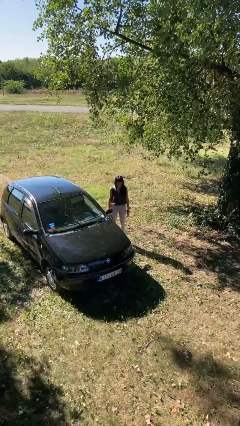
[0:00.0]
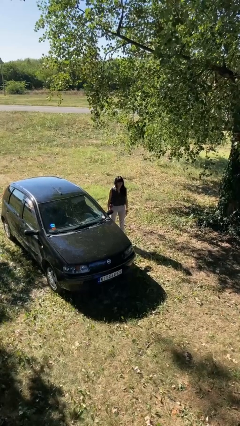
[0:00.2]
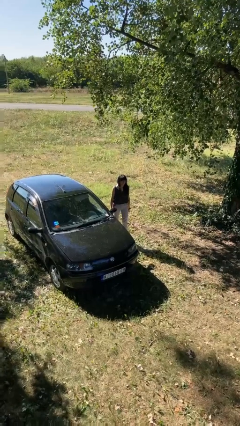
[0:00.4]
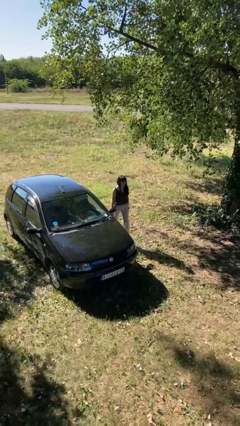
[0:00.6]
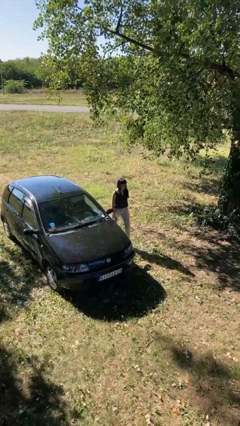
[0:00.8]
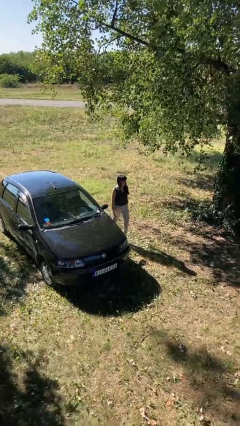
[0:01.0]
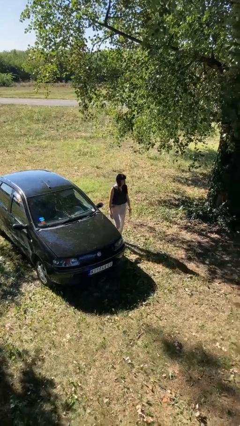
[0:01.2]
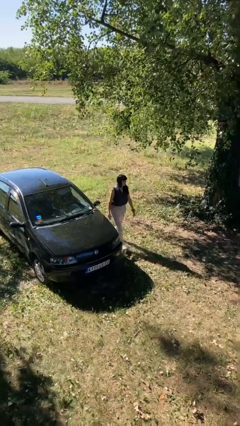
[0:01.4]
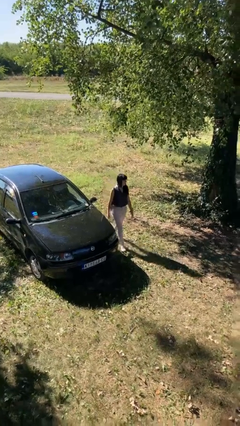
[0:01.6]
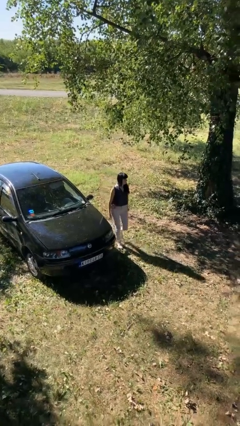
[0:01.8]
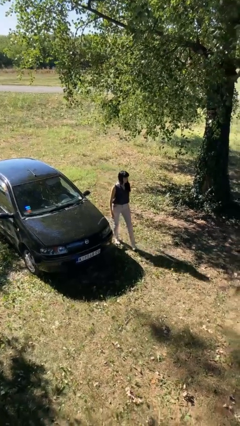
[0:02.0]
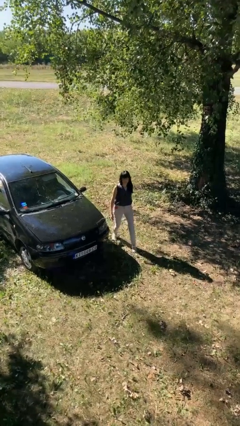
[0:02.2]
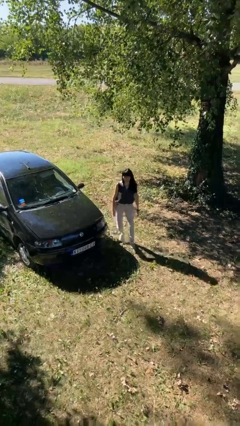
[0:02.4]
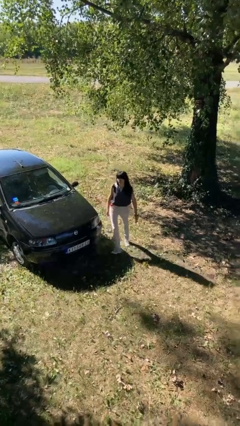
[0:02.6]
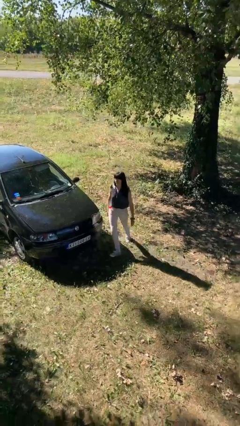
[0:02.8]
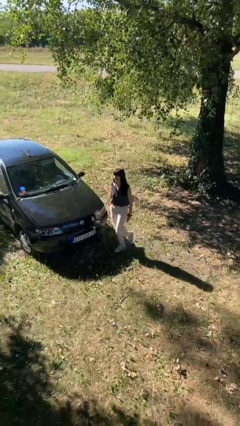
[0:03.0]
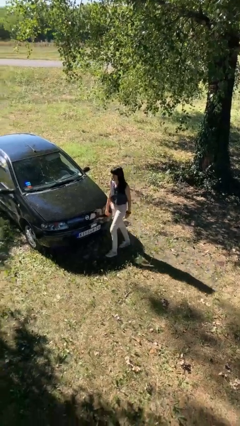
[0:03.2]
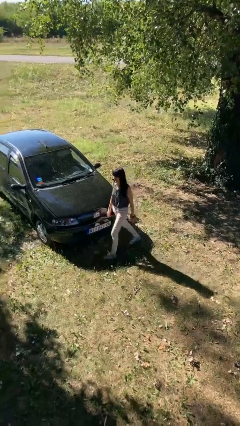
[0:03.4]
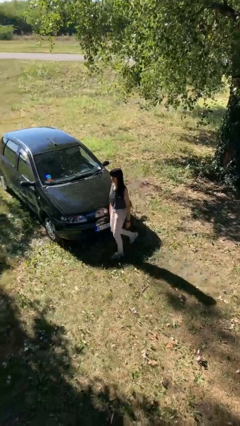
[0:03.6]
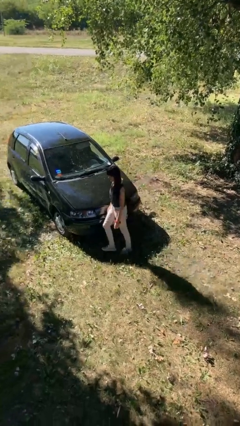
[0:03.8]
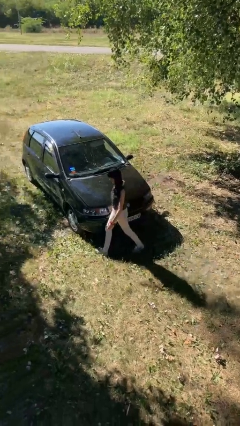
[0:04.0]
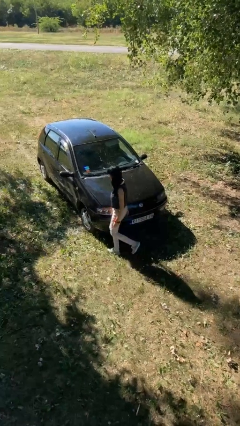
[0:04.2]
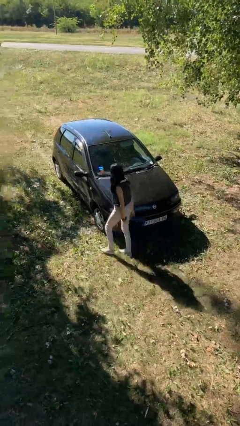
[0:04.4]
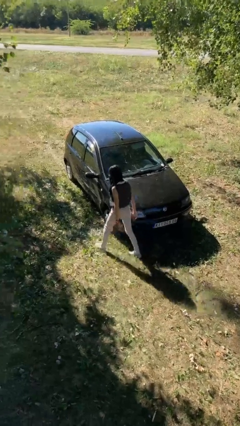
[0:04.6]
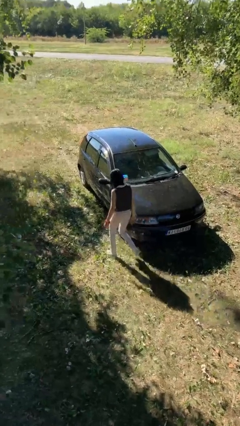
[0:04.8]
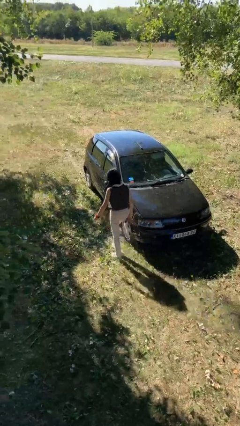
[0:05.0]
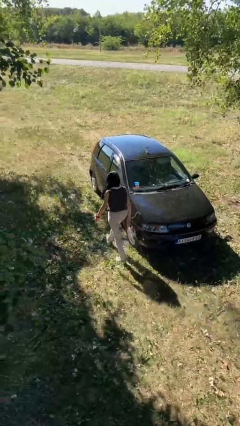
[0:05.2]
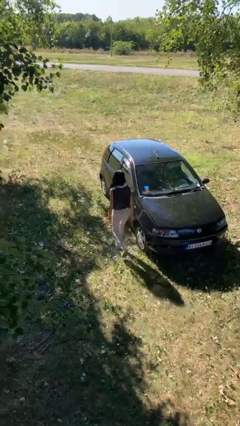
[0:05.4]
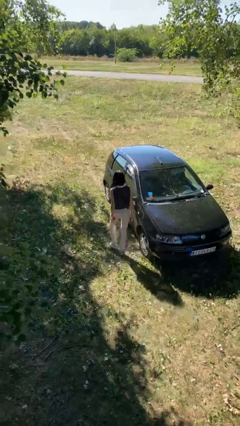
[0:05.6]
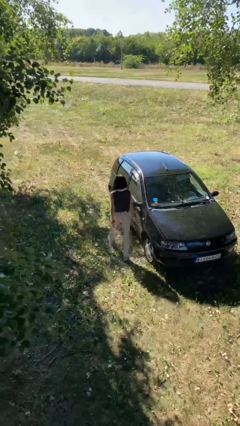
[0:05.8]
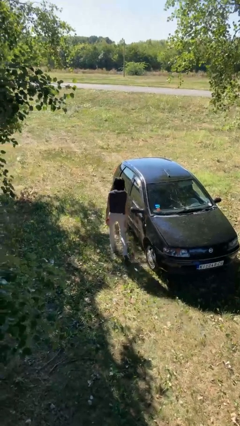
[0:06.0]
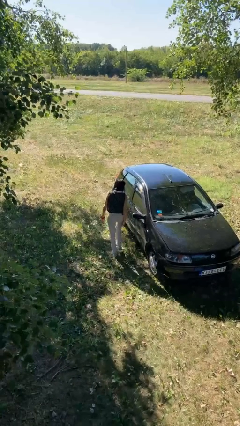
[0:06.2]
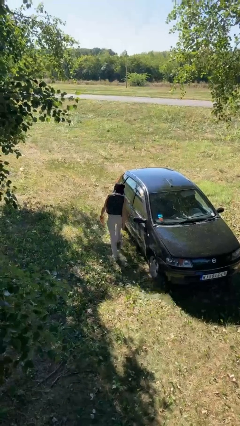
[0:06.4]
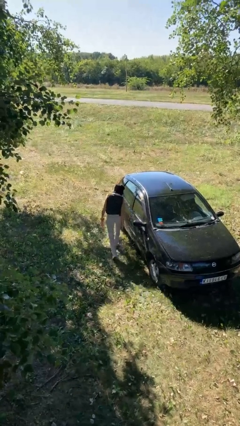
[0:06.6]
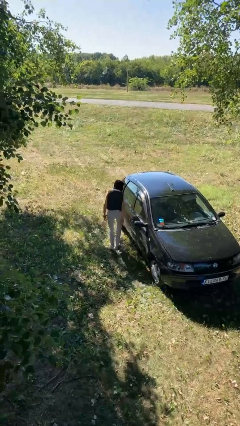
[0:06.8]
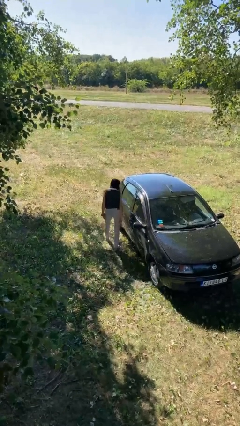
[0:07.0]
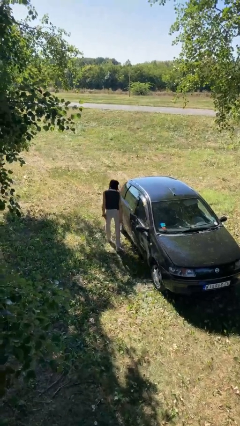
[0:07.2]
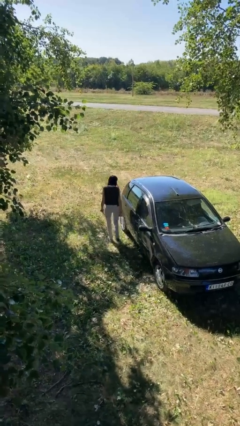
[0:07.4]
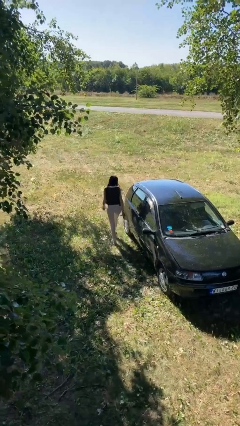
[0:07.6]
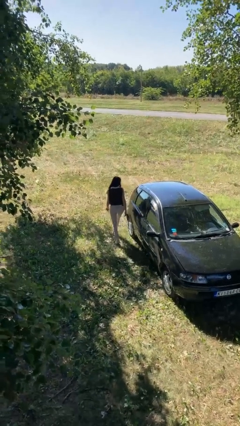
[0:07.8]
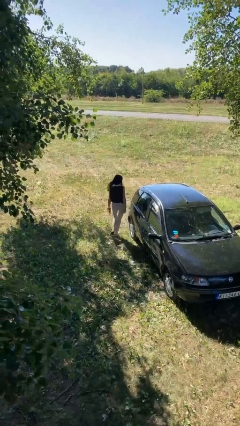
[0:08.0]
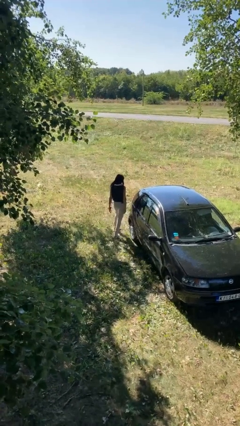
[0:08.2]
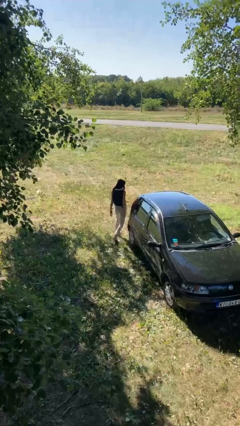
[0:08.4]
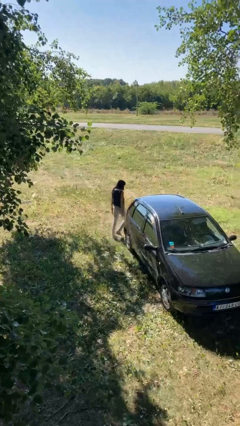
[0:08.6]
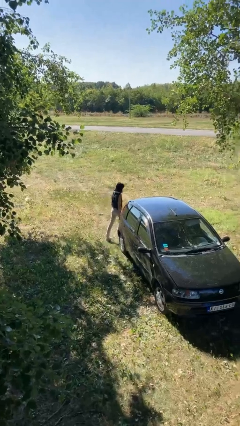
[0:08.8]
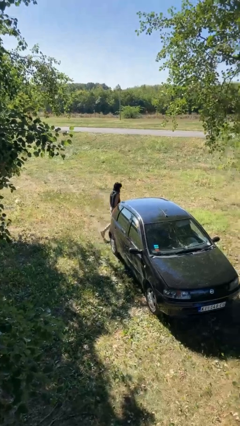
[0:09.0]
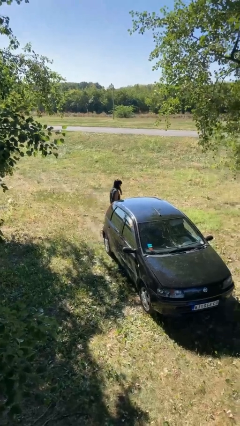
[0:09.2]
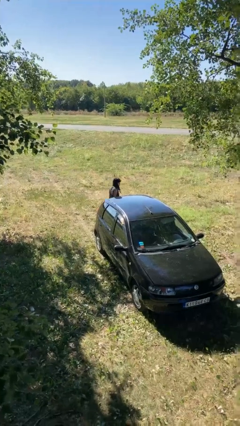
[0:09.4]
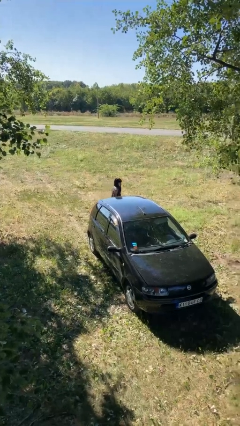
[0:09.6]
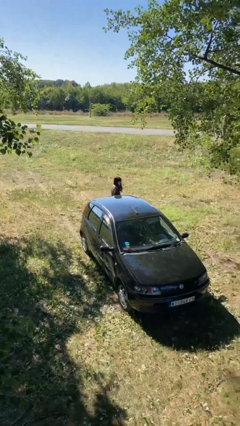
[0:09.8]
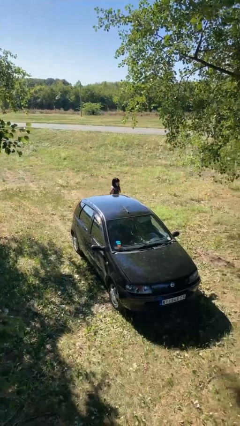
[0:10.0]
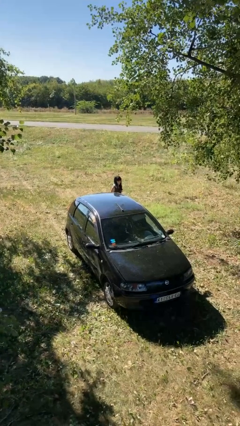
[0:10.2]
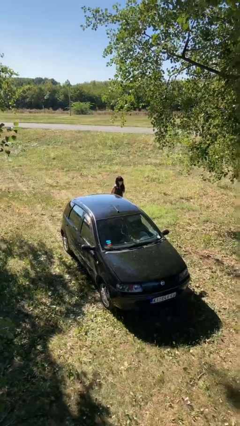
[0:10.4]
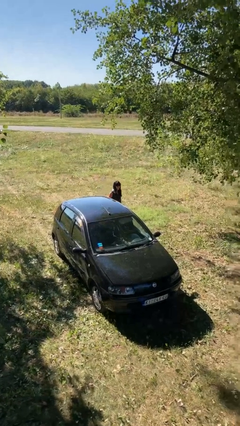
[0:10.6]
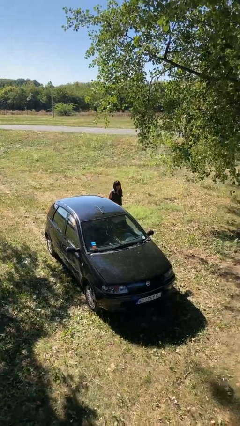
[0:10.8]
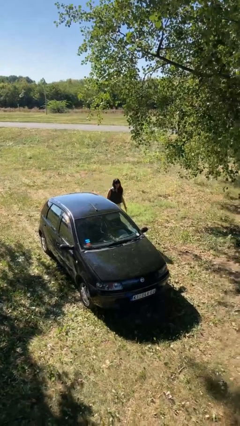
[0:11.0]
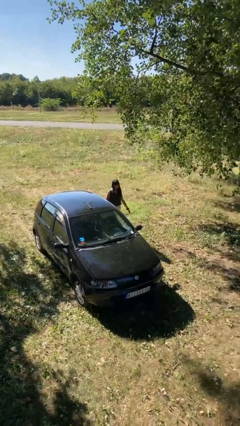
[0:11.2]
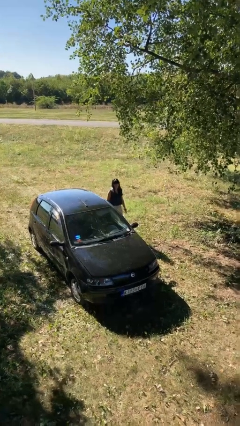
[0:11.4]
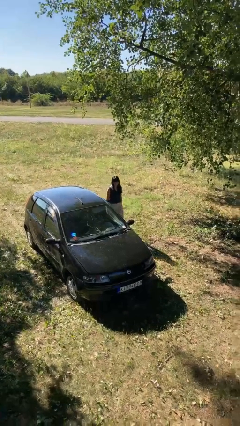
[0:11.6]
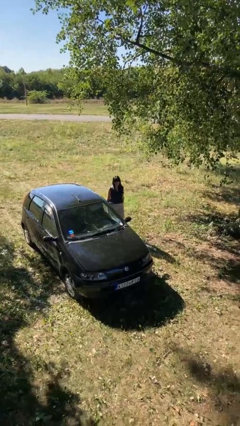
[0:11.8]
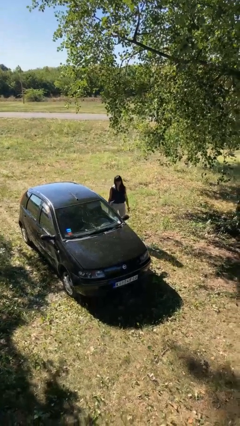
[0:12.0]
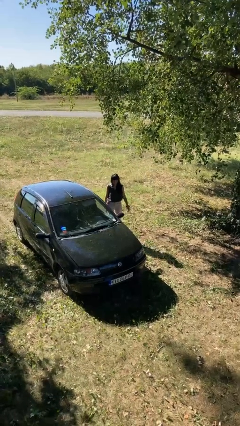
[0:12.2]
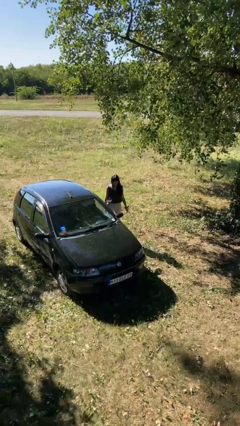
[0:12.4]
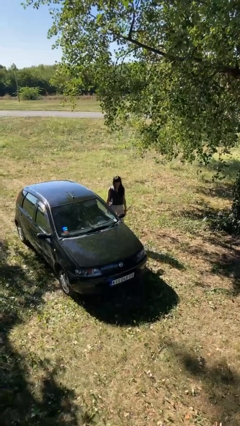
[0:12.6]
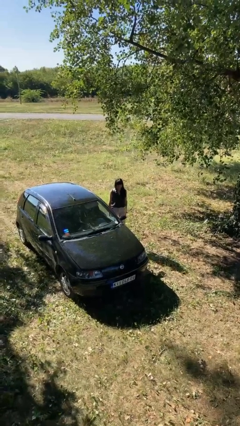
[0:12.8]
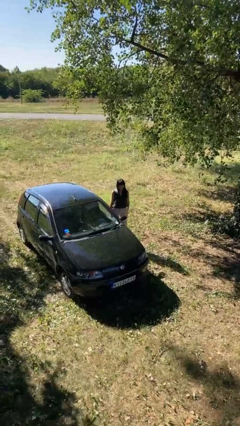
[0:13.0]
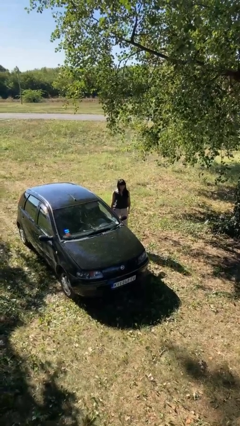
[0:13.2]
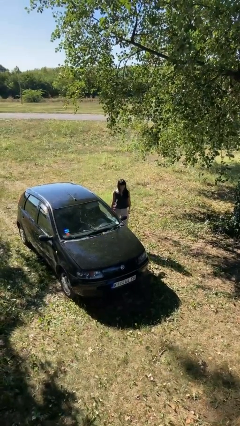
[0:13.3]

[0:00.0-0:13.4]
person walks around car

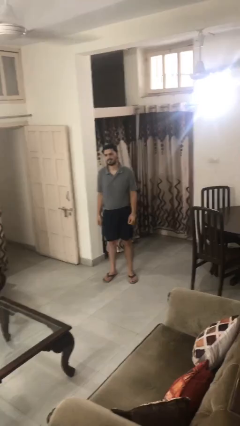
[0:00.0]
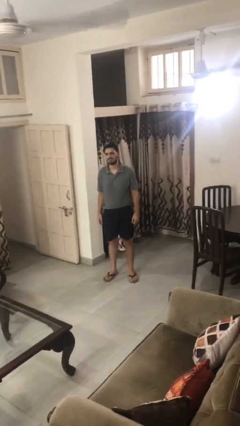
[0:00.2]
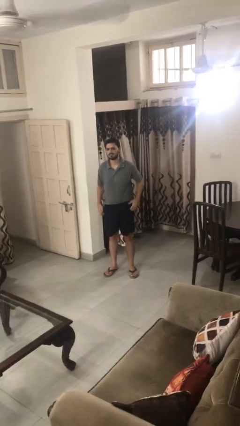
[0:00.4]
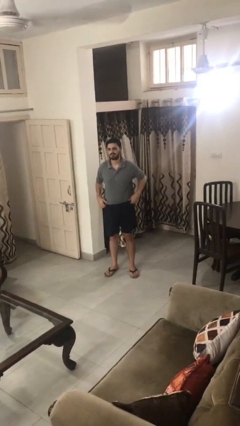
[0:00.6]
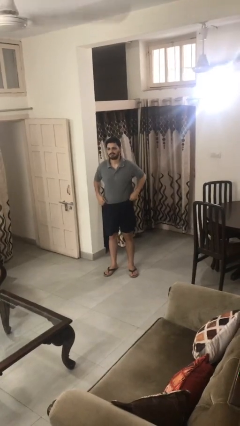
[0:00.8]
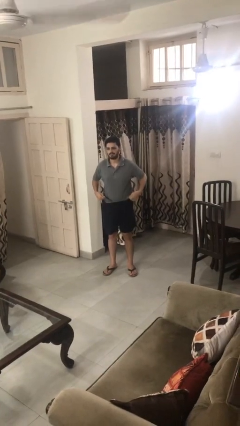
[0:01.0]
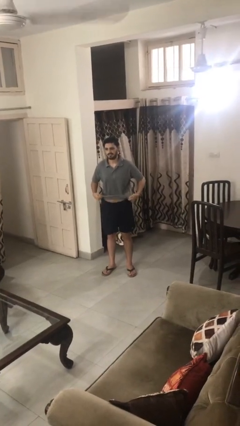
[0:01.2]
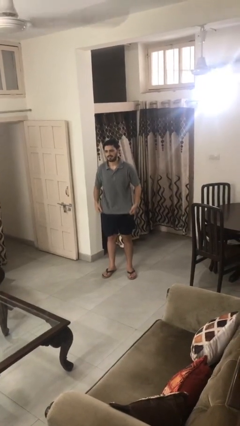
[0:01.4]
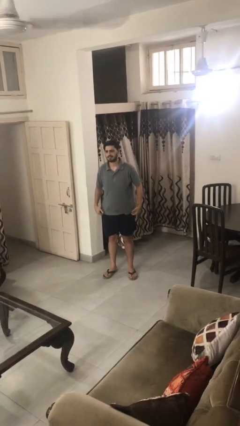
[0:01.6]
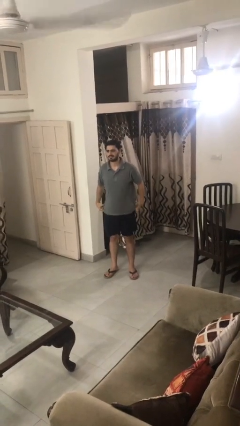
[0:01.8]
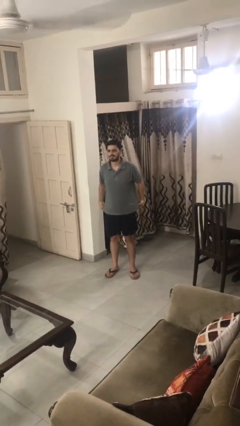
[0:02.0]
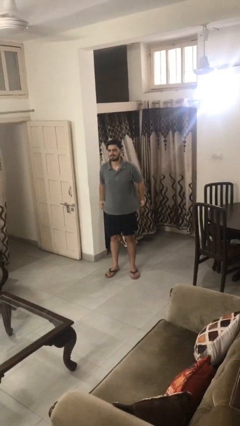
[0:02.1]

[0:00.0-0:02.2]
person untucks shirt

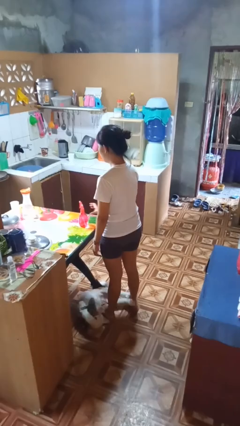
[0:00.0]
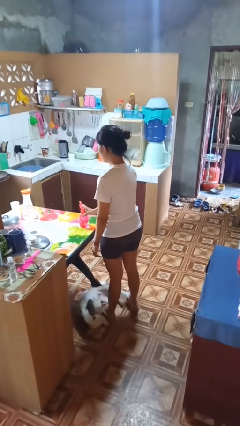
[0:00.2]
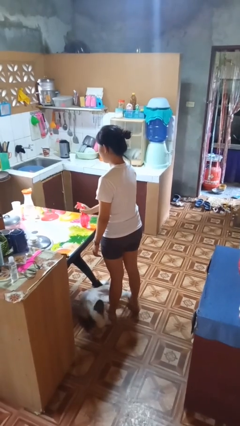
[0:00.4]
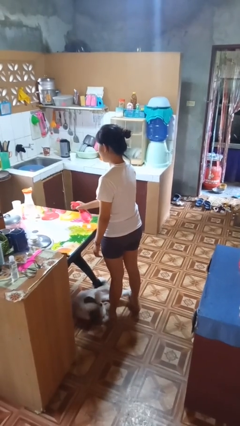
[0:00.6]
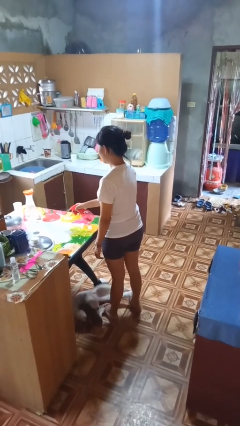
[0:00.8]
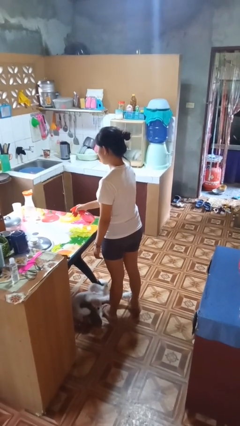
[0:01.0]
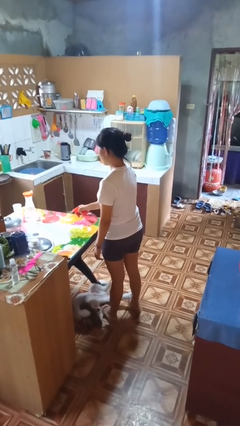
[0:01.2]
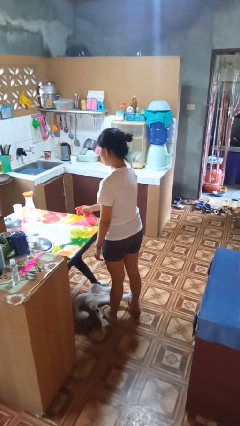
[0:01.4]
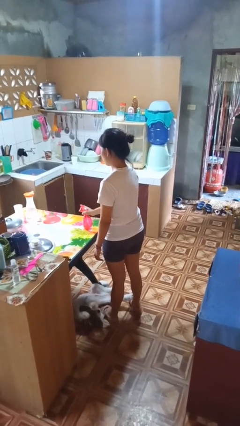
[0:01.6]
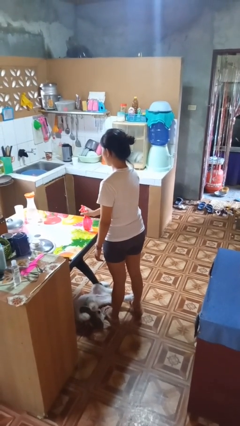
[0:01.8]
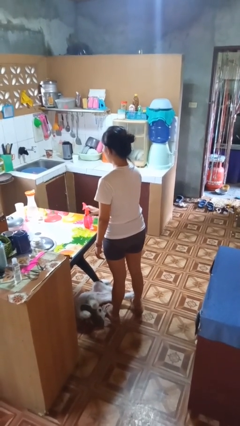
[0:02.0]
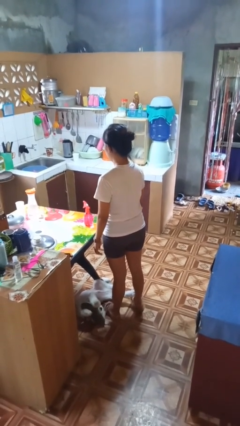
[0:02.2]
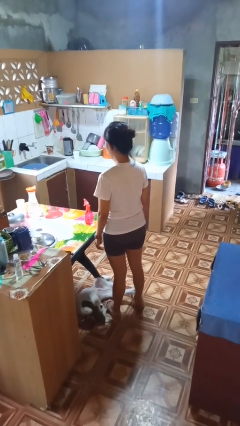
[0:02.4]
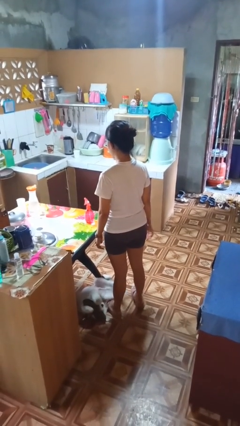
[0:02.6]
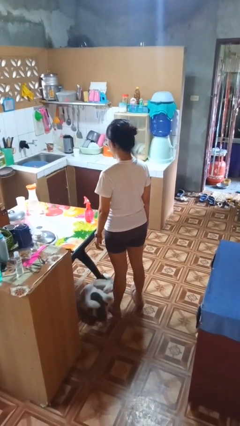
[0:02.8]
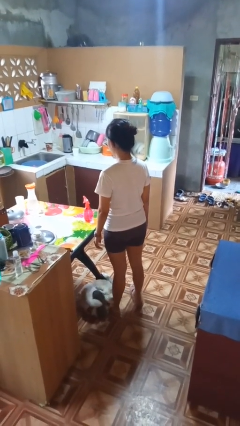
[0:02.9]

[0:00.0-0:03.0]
person sprays from bottle
